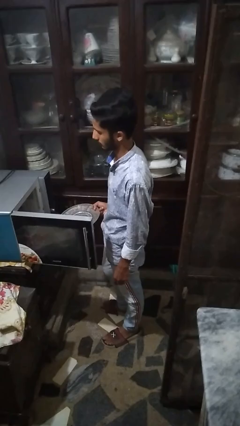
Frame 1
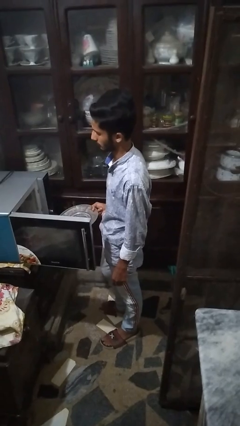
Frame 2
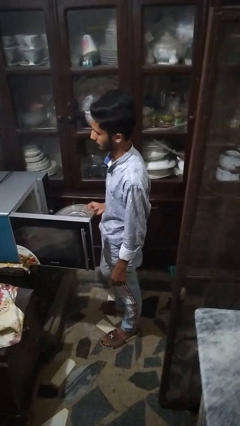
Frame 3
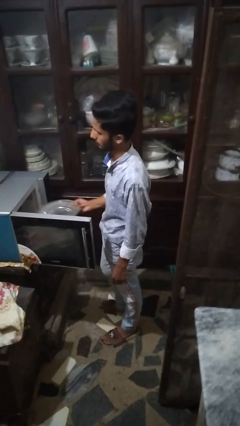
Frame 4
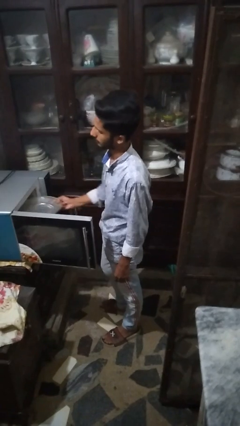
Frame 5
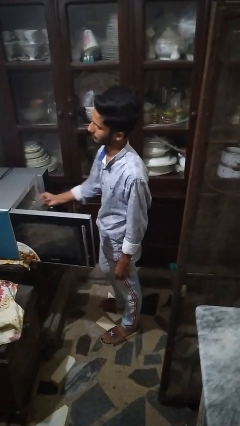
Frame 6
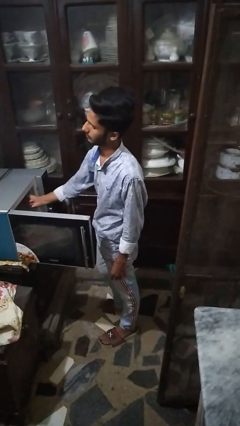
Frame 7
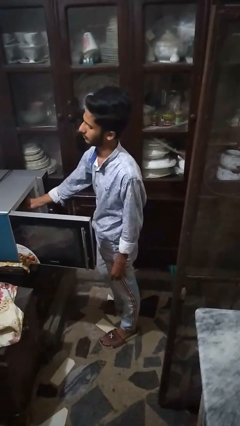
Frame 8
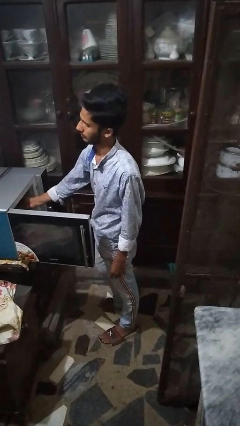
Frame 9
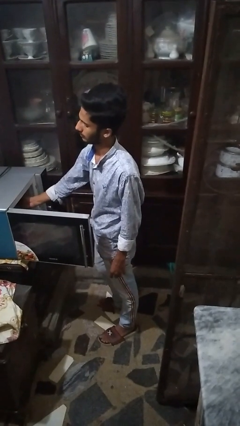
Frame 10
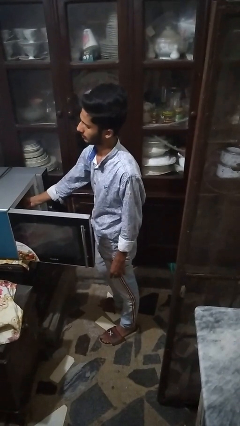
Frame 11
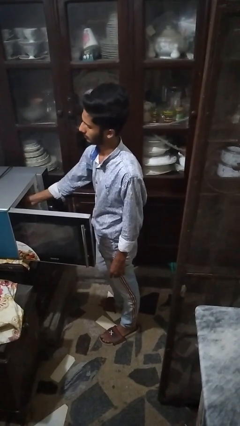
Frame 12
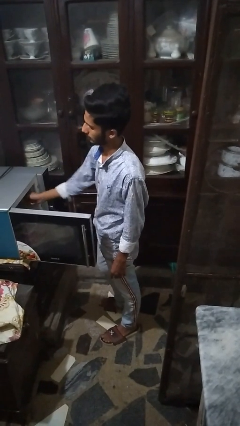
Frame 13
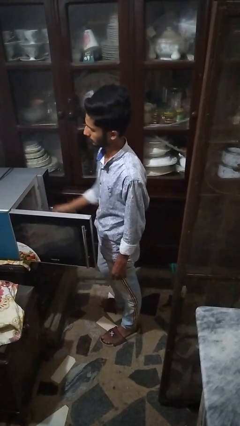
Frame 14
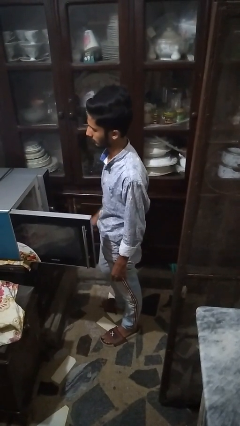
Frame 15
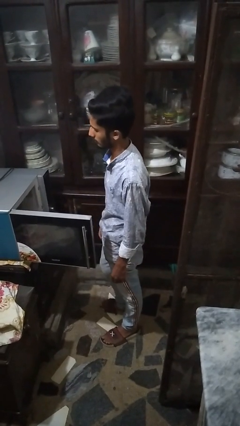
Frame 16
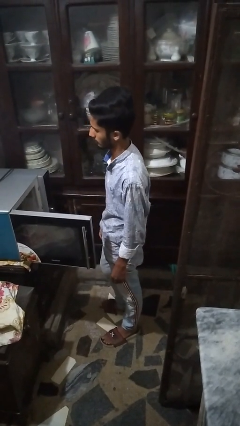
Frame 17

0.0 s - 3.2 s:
person puts object into microwave

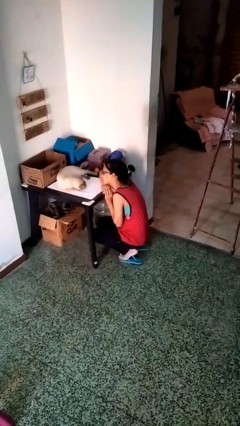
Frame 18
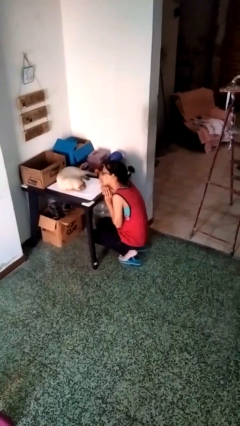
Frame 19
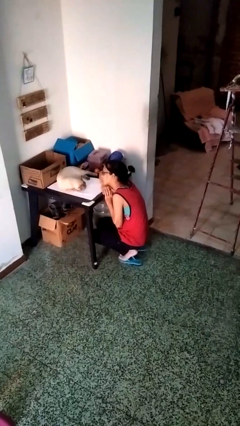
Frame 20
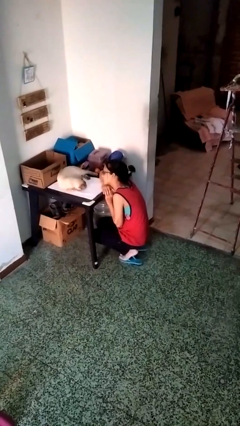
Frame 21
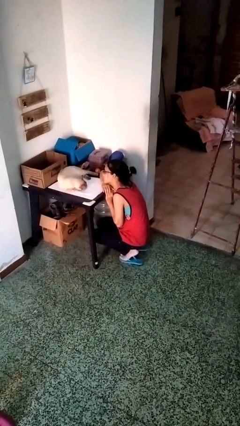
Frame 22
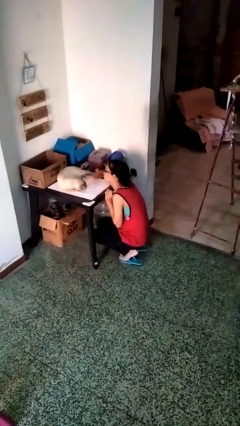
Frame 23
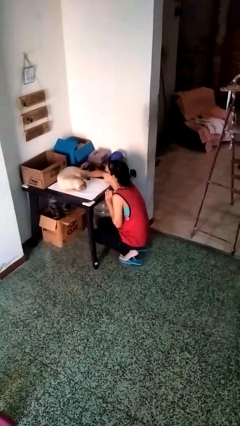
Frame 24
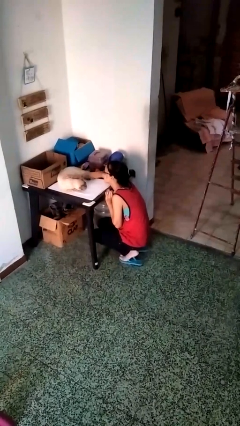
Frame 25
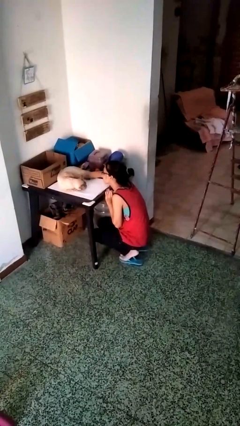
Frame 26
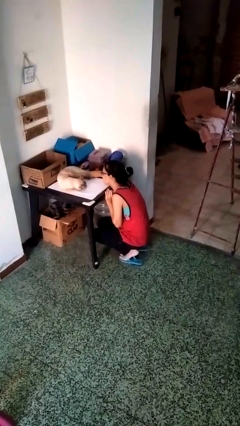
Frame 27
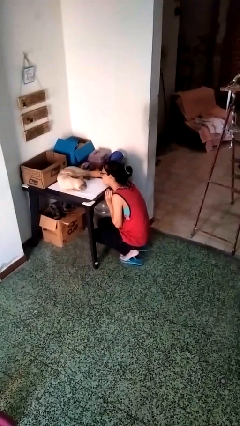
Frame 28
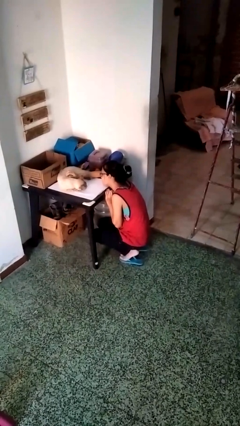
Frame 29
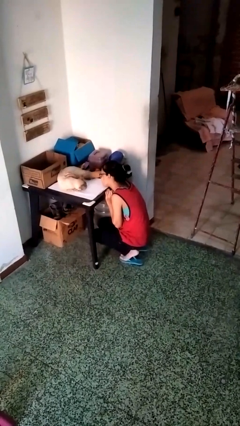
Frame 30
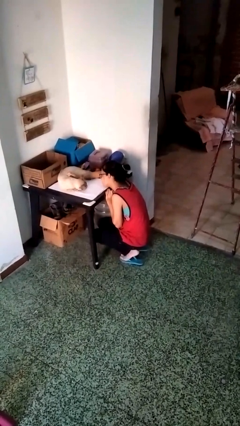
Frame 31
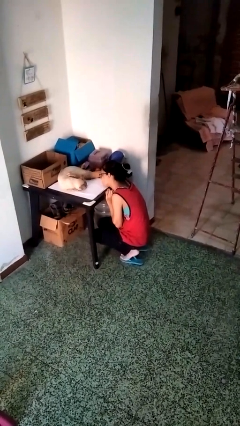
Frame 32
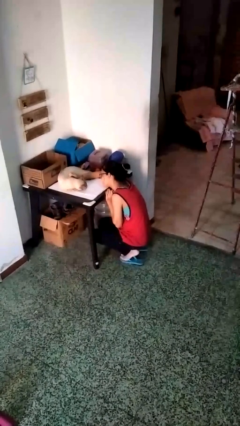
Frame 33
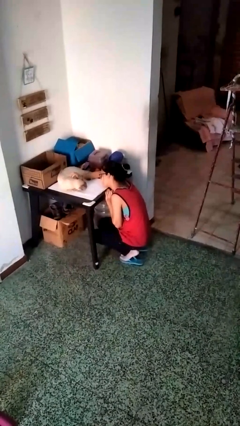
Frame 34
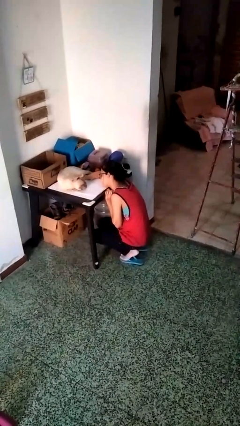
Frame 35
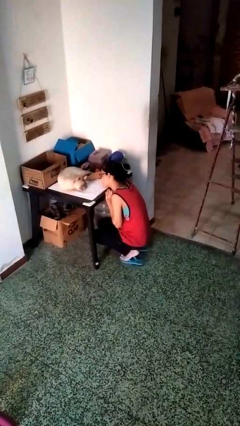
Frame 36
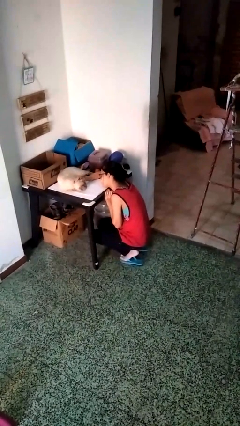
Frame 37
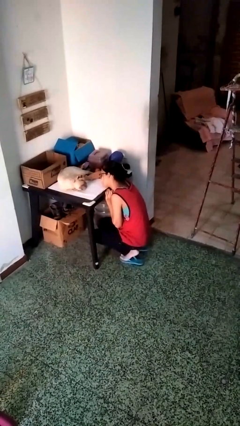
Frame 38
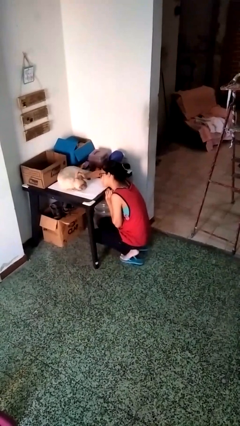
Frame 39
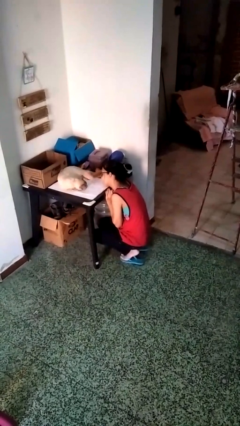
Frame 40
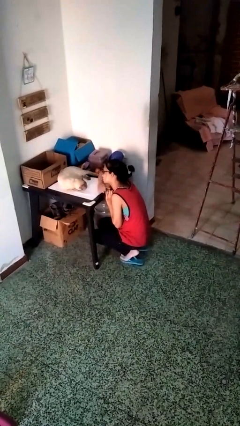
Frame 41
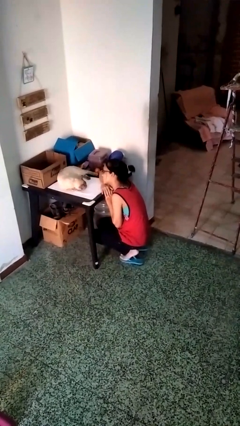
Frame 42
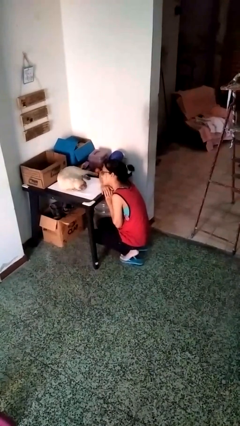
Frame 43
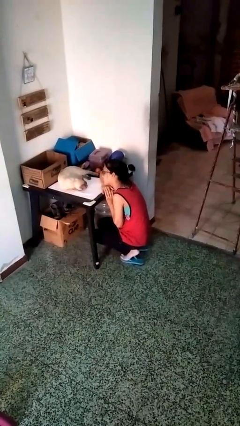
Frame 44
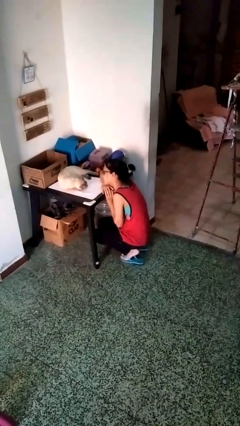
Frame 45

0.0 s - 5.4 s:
person pets cat

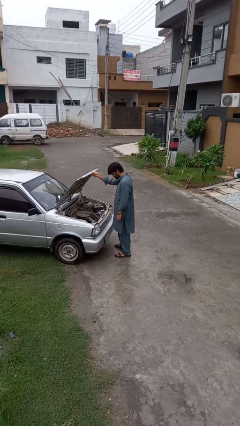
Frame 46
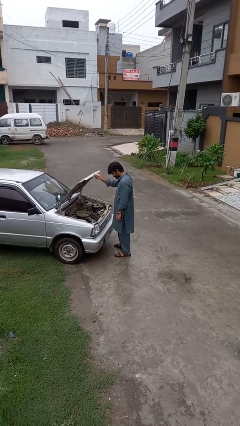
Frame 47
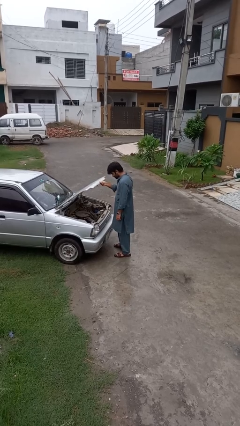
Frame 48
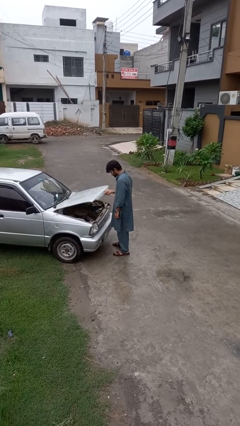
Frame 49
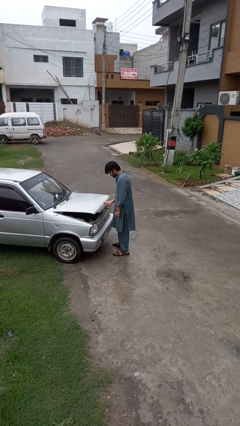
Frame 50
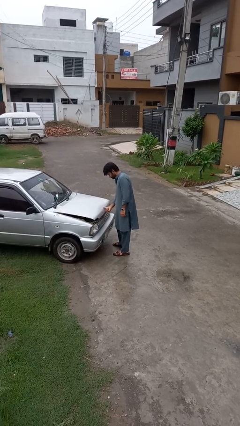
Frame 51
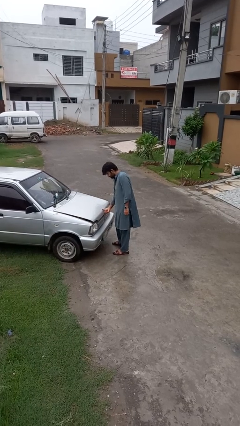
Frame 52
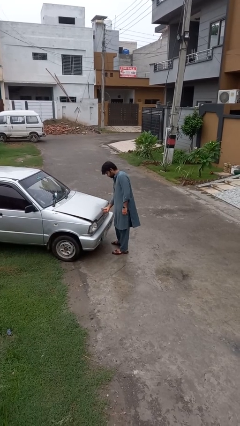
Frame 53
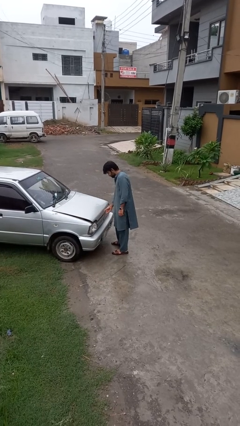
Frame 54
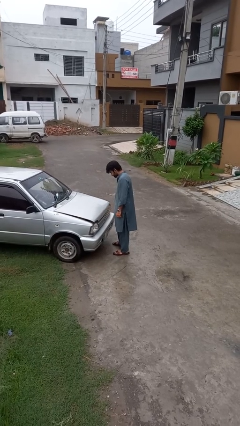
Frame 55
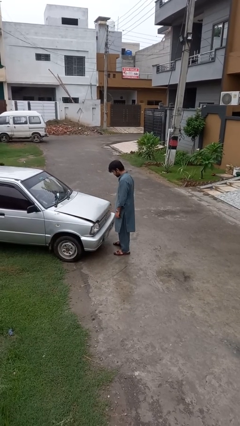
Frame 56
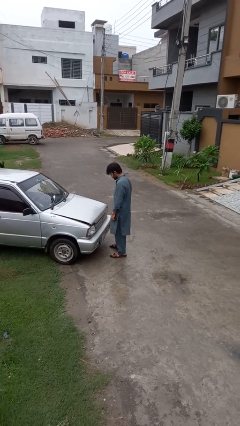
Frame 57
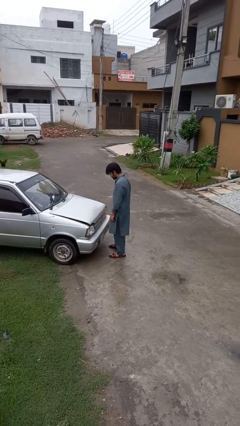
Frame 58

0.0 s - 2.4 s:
person closes car hood

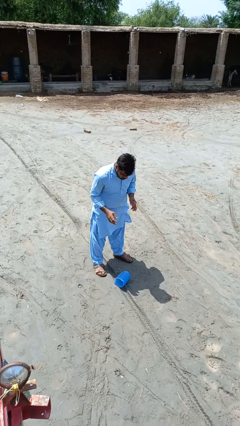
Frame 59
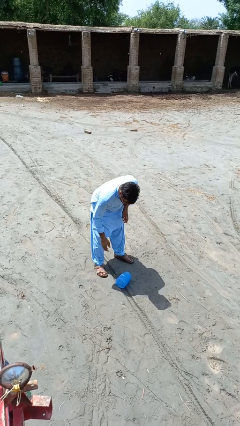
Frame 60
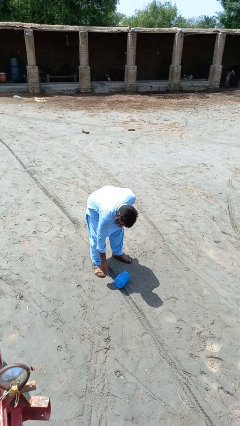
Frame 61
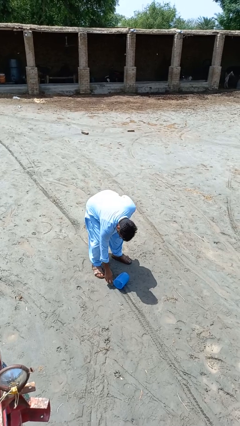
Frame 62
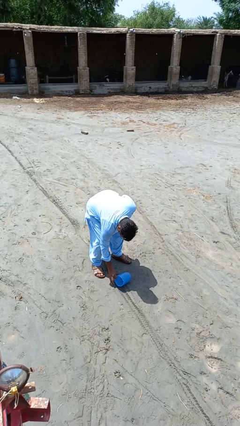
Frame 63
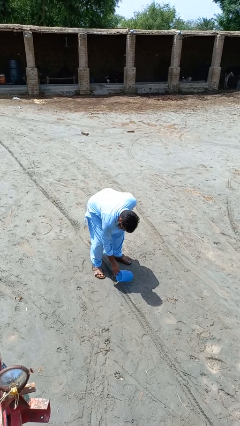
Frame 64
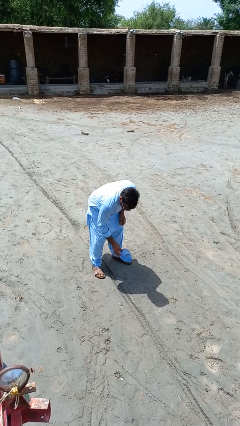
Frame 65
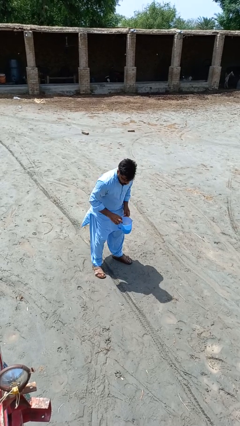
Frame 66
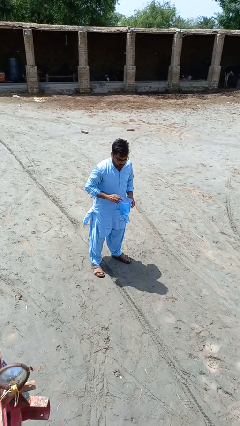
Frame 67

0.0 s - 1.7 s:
person picks up object from floor

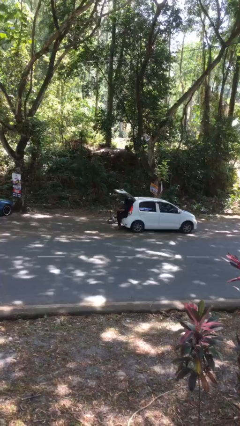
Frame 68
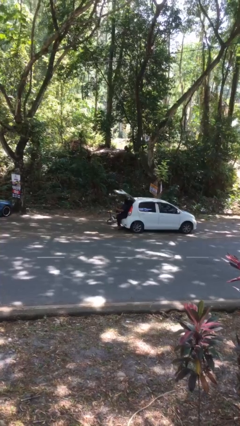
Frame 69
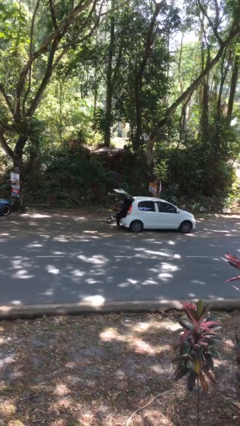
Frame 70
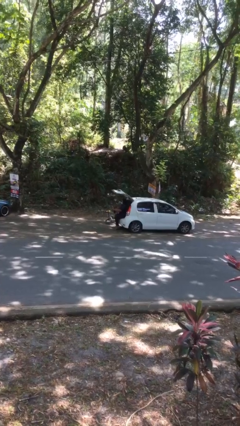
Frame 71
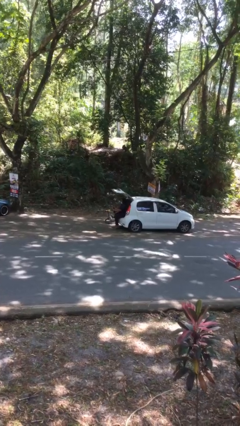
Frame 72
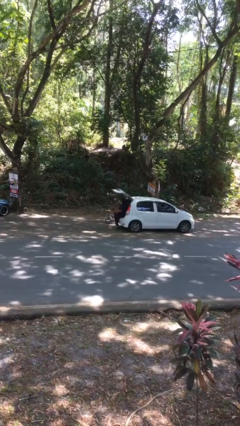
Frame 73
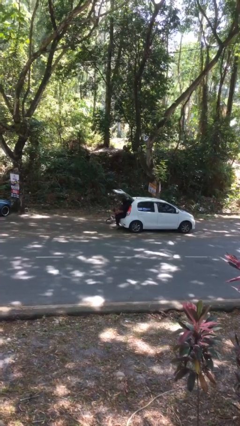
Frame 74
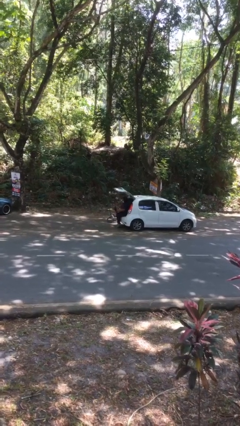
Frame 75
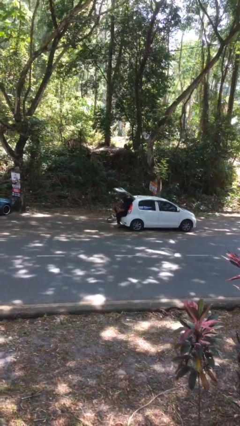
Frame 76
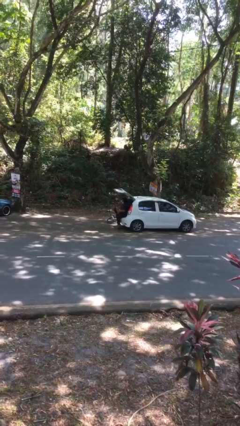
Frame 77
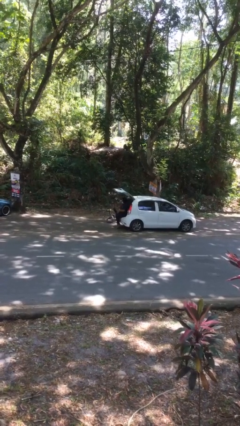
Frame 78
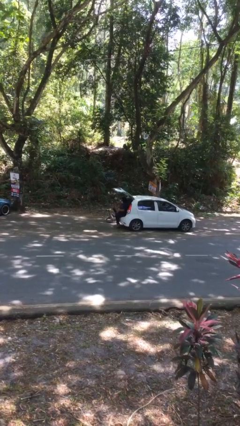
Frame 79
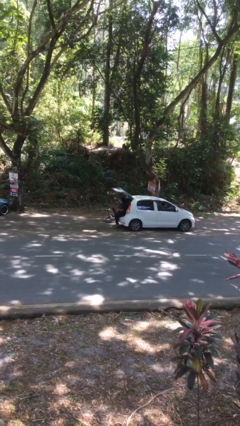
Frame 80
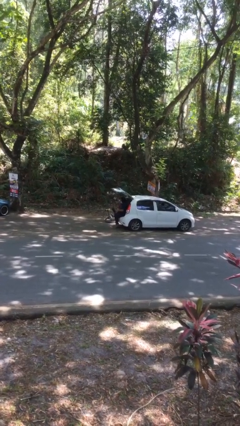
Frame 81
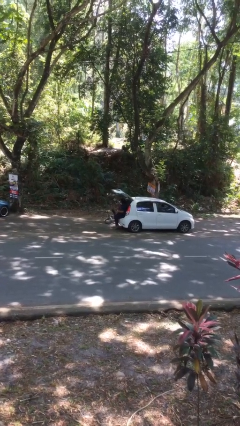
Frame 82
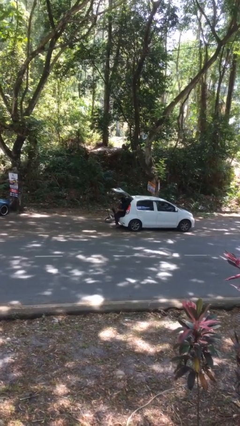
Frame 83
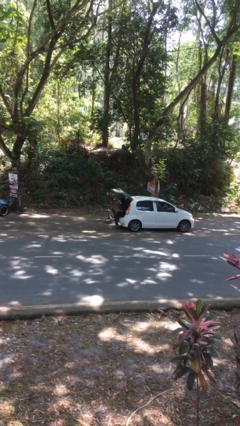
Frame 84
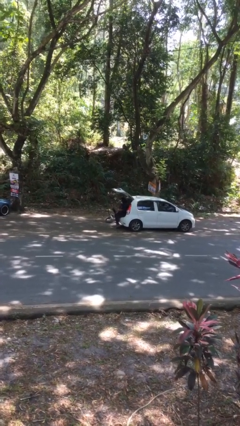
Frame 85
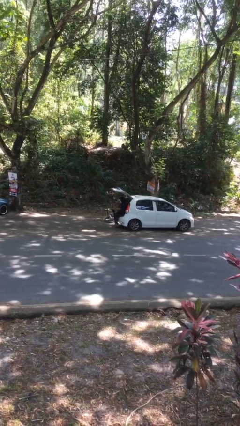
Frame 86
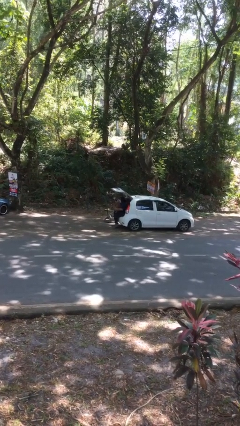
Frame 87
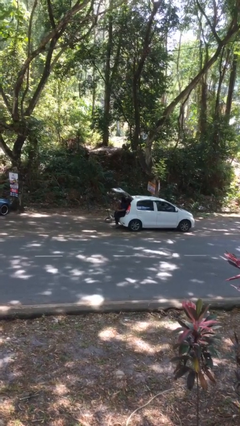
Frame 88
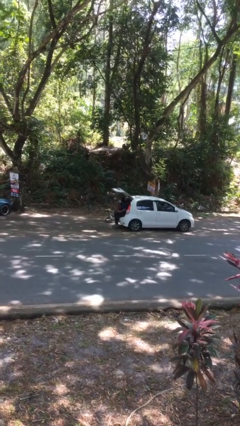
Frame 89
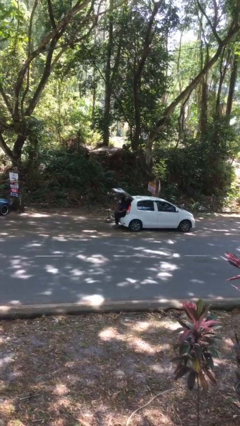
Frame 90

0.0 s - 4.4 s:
person interacts with laptop

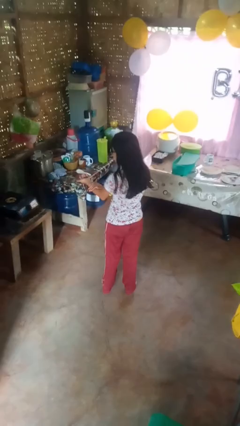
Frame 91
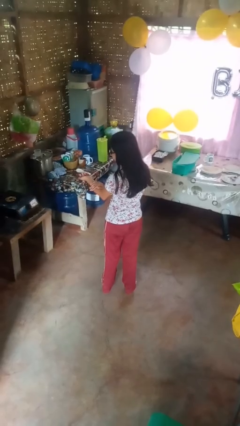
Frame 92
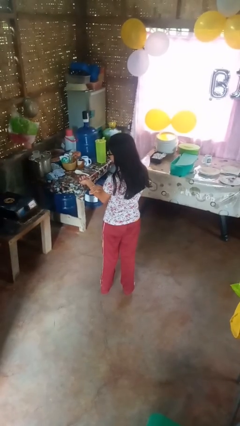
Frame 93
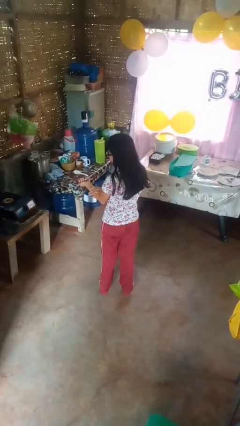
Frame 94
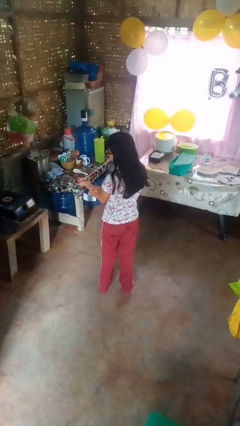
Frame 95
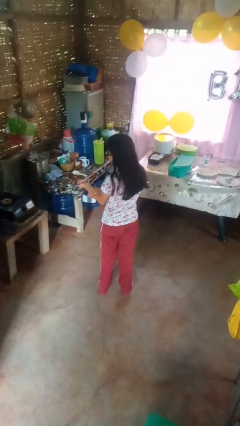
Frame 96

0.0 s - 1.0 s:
person swats bug
